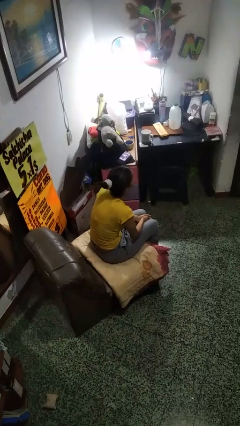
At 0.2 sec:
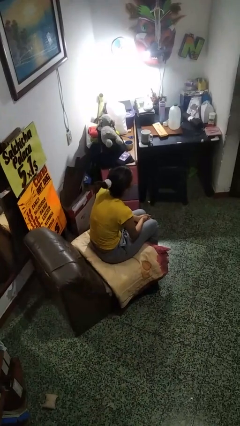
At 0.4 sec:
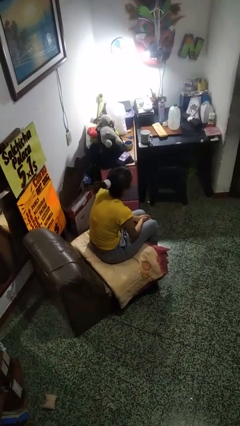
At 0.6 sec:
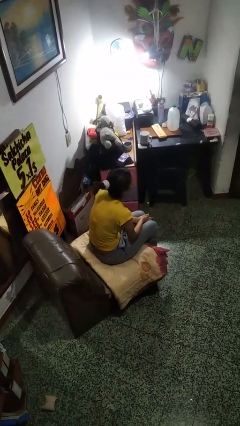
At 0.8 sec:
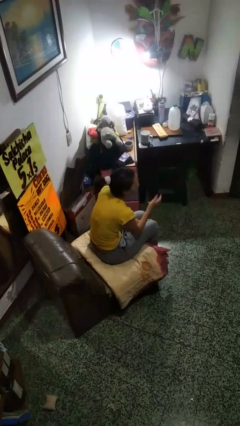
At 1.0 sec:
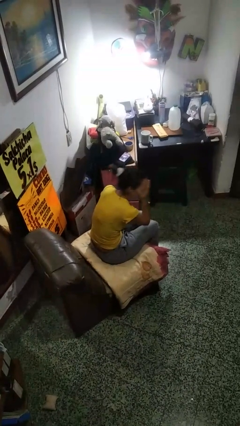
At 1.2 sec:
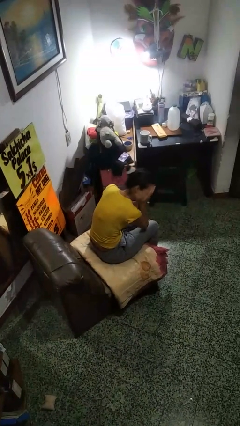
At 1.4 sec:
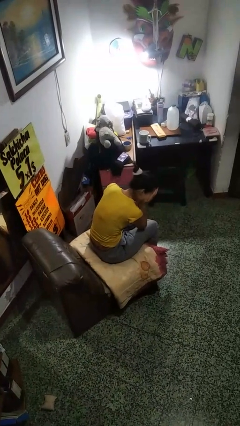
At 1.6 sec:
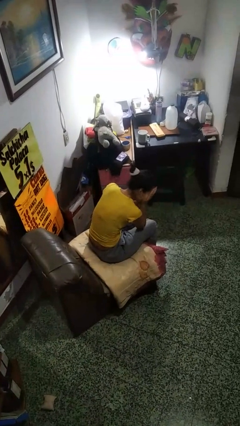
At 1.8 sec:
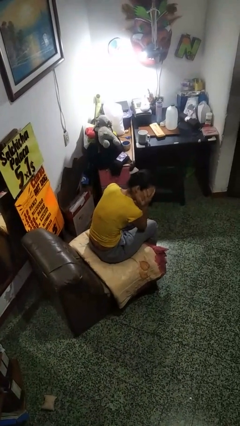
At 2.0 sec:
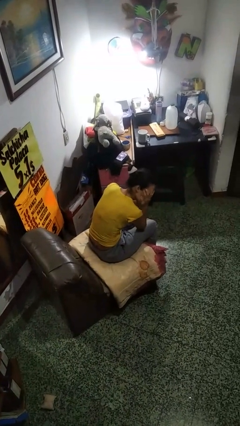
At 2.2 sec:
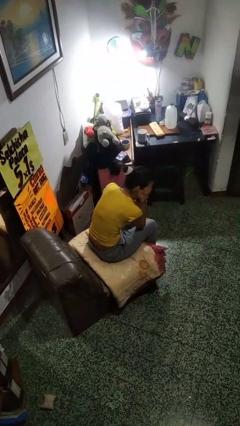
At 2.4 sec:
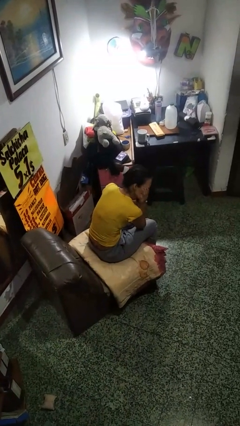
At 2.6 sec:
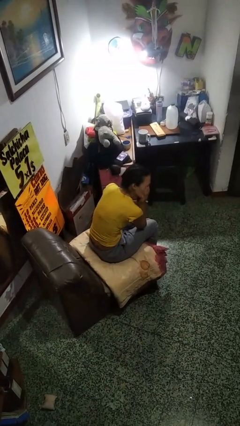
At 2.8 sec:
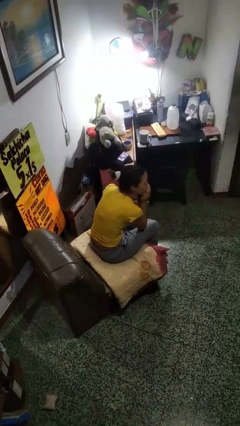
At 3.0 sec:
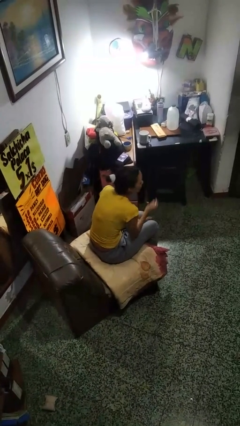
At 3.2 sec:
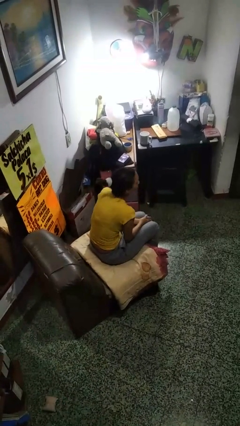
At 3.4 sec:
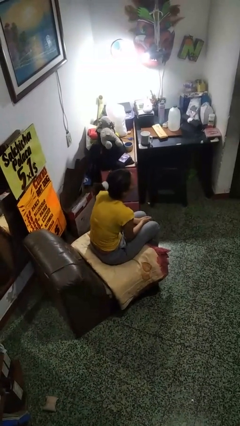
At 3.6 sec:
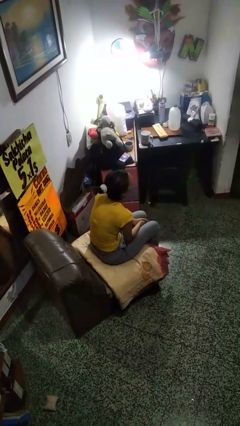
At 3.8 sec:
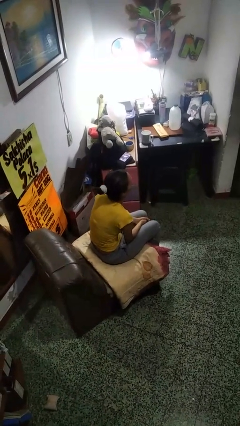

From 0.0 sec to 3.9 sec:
person covers face with hands

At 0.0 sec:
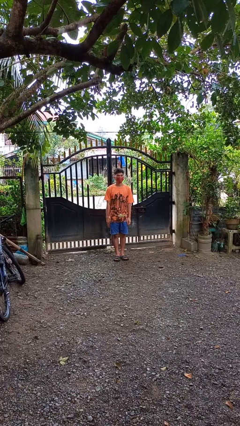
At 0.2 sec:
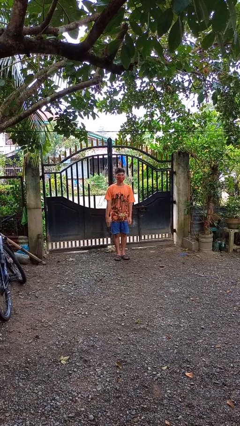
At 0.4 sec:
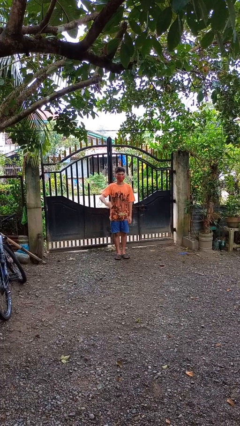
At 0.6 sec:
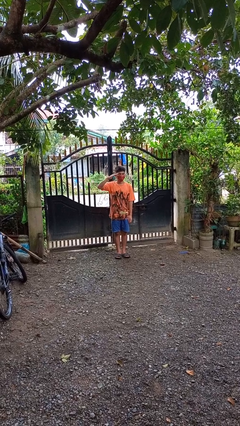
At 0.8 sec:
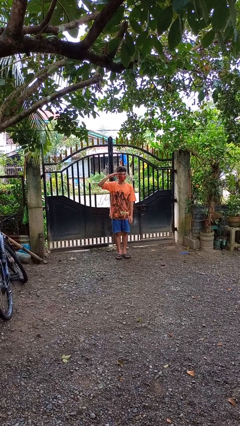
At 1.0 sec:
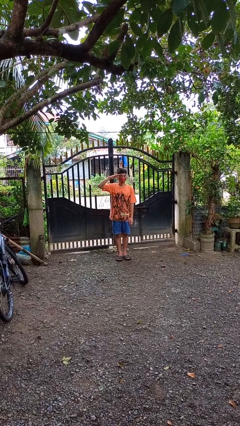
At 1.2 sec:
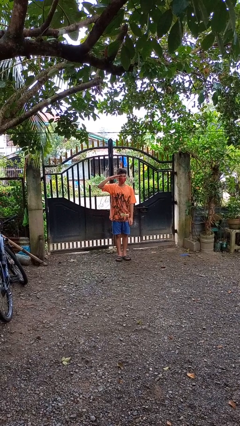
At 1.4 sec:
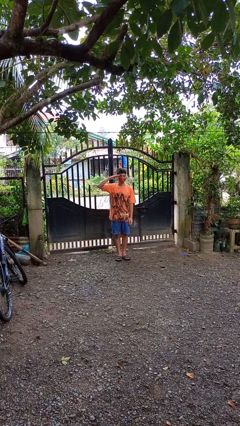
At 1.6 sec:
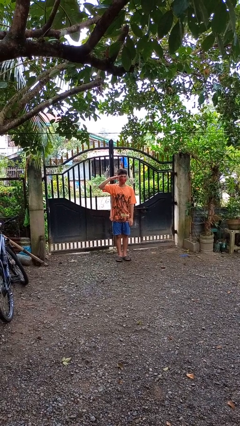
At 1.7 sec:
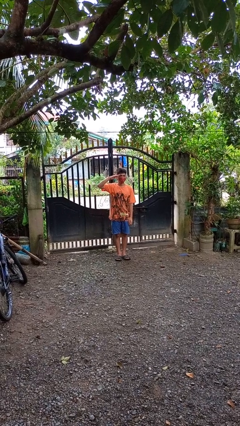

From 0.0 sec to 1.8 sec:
person salutes

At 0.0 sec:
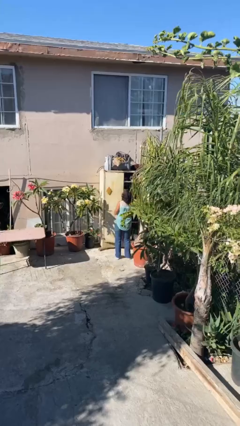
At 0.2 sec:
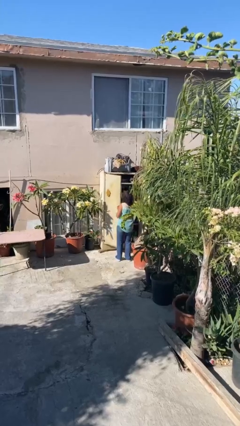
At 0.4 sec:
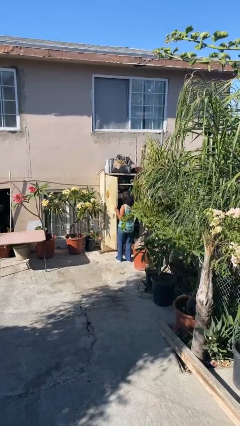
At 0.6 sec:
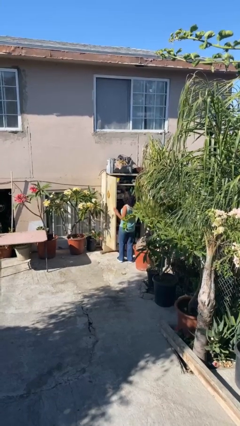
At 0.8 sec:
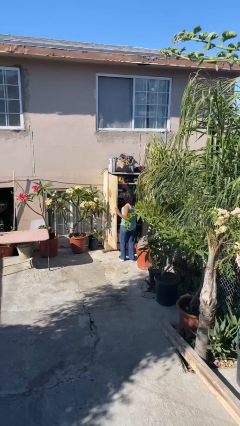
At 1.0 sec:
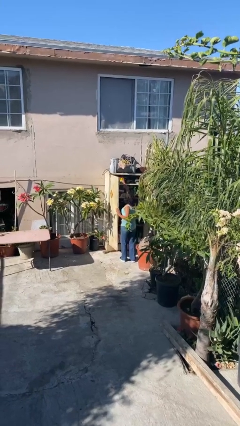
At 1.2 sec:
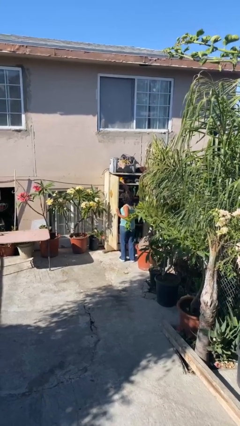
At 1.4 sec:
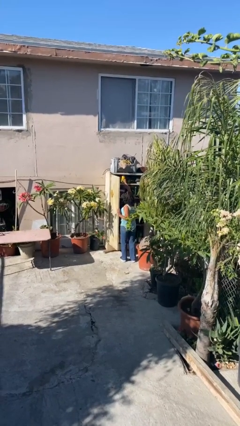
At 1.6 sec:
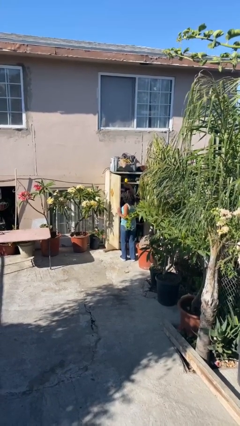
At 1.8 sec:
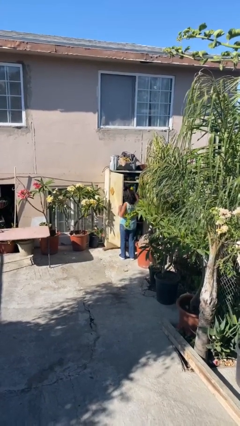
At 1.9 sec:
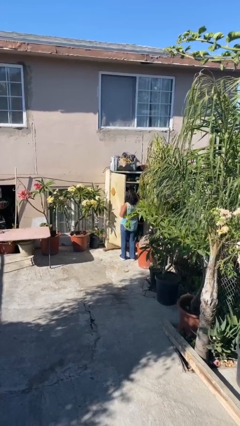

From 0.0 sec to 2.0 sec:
person picks up object from shelf

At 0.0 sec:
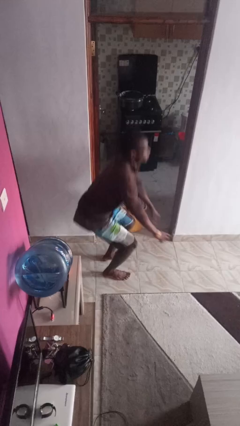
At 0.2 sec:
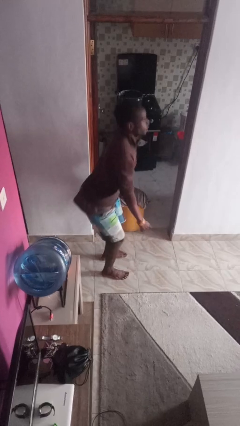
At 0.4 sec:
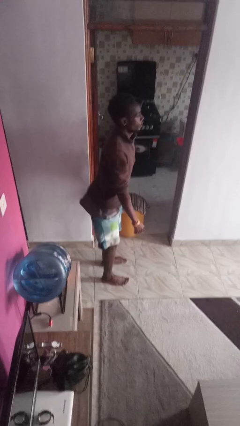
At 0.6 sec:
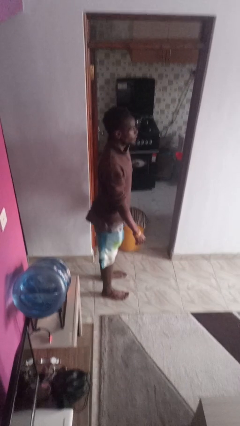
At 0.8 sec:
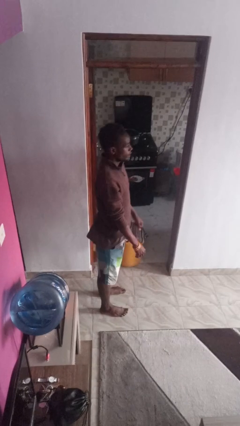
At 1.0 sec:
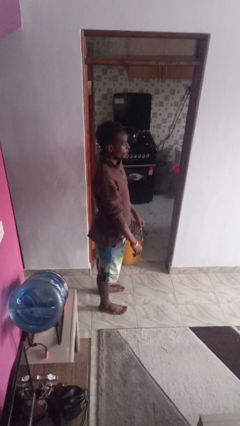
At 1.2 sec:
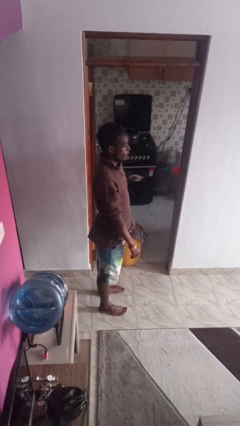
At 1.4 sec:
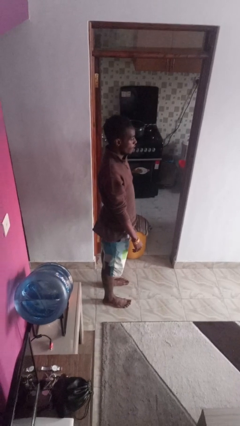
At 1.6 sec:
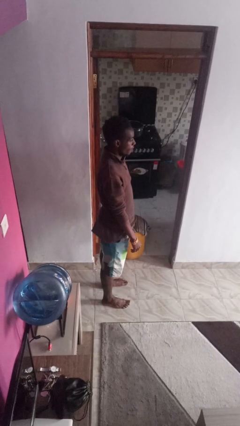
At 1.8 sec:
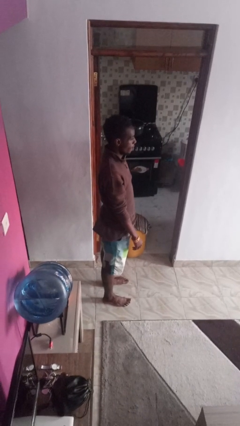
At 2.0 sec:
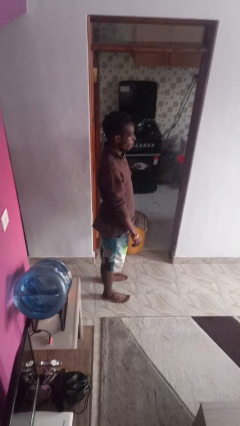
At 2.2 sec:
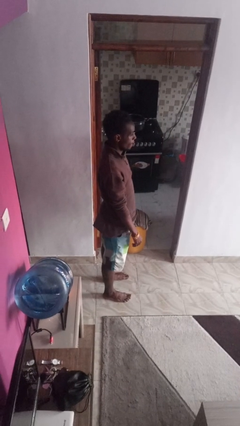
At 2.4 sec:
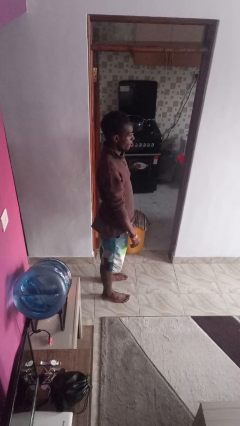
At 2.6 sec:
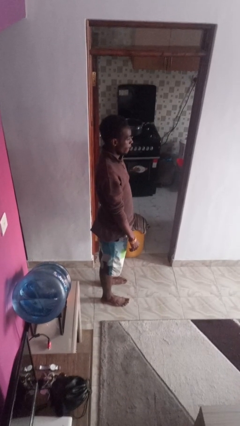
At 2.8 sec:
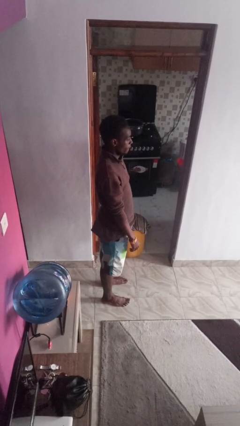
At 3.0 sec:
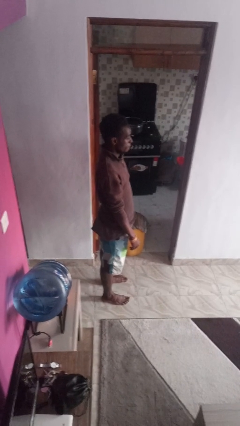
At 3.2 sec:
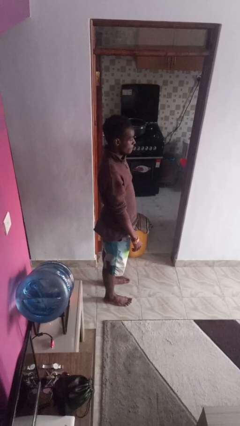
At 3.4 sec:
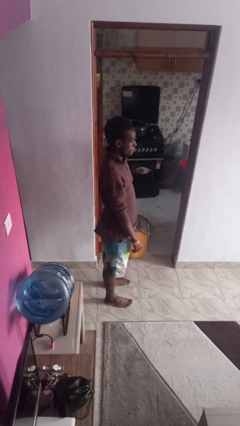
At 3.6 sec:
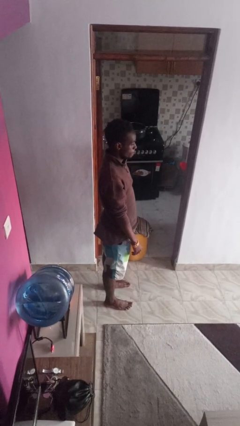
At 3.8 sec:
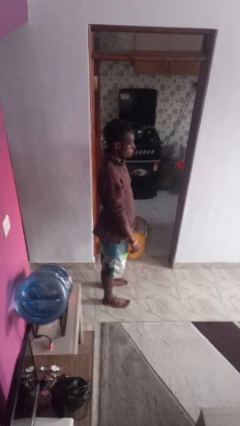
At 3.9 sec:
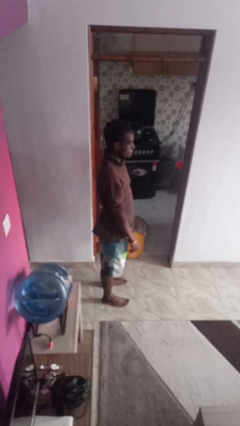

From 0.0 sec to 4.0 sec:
person stands up

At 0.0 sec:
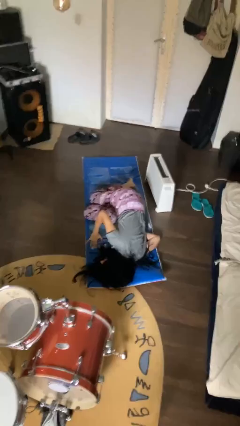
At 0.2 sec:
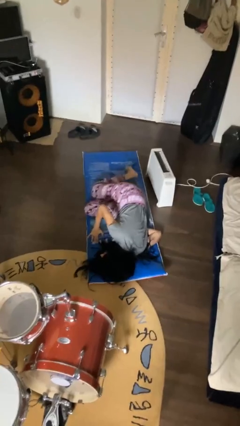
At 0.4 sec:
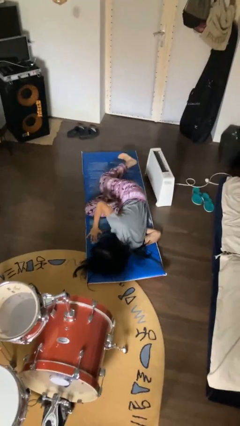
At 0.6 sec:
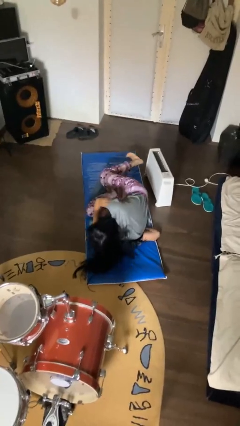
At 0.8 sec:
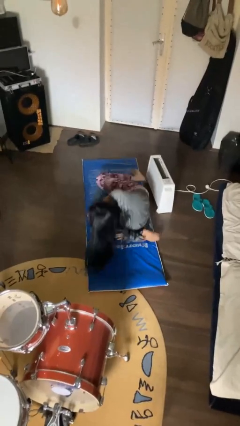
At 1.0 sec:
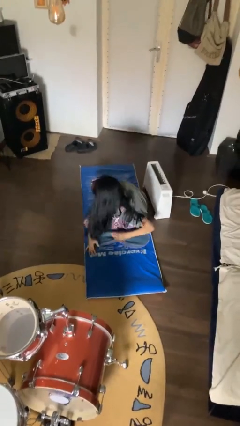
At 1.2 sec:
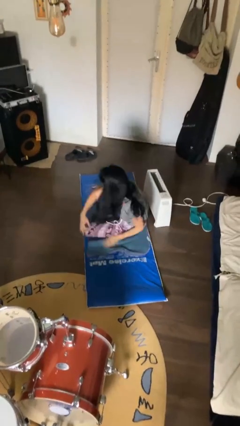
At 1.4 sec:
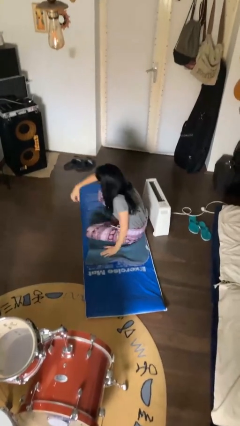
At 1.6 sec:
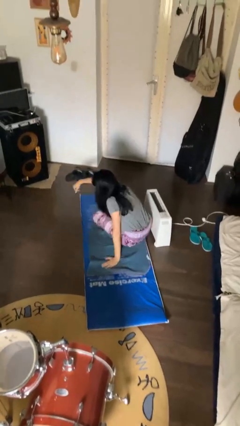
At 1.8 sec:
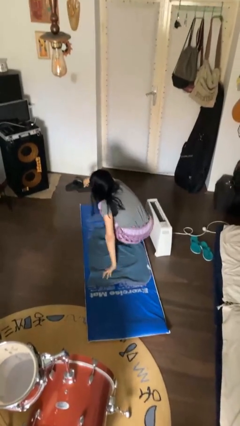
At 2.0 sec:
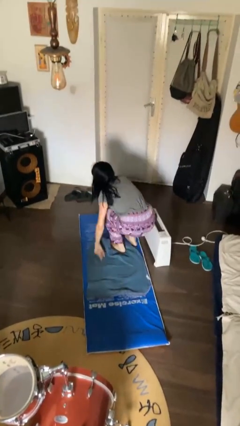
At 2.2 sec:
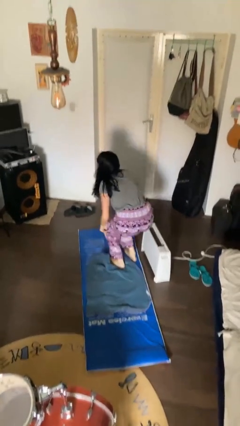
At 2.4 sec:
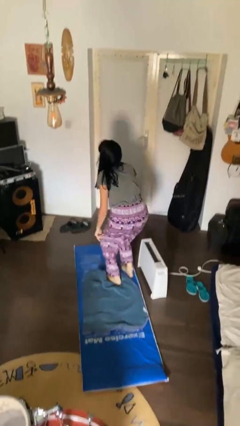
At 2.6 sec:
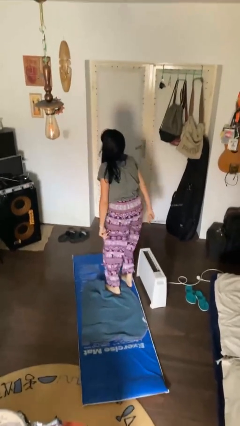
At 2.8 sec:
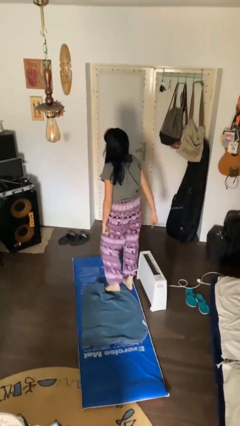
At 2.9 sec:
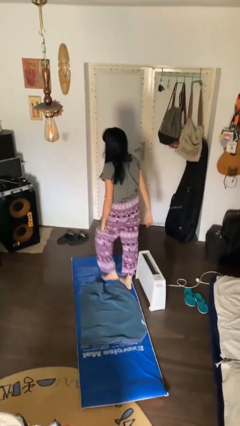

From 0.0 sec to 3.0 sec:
person stands up from floor

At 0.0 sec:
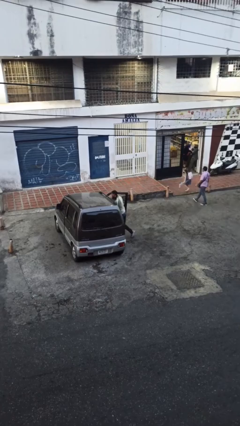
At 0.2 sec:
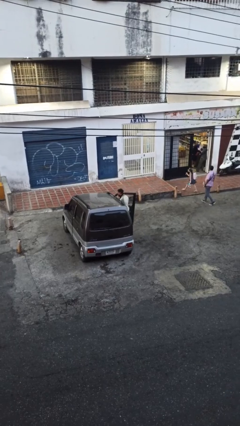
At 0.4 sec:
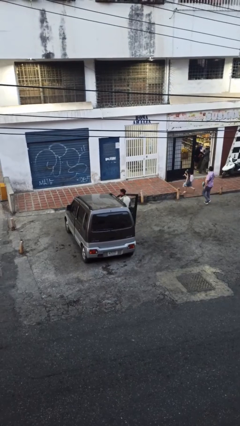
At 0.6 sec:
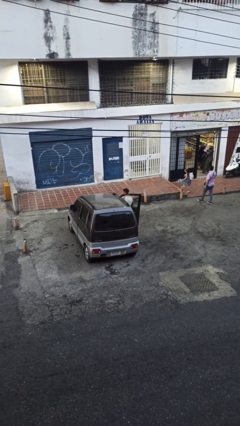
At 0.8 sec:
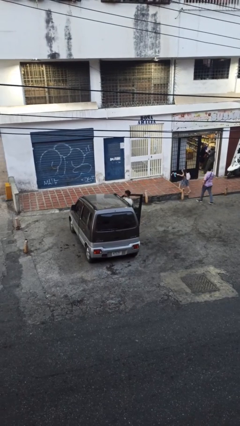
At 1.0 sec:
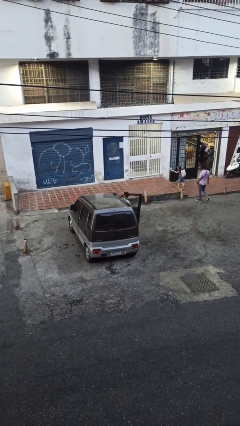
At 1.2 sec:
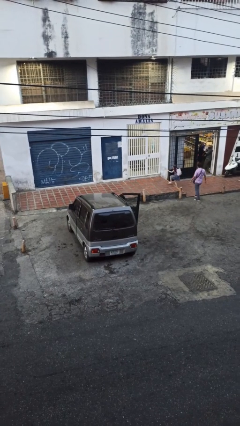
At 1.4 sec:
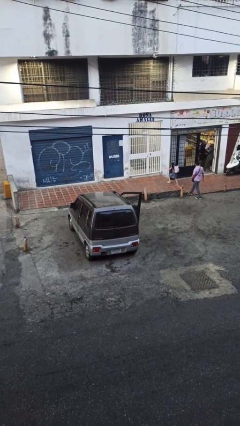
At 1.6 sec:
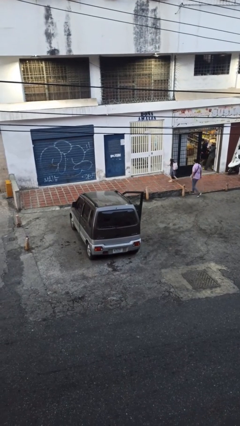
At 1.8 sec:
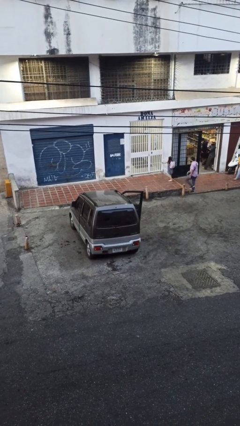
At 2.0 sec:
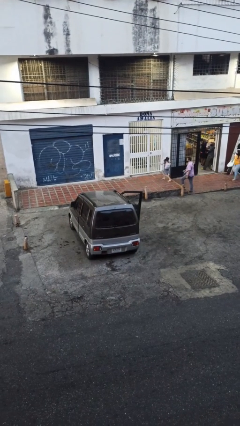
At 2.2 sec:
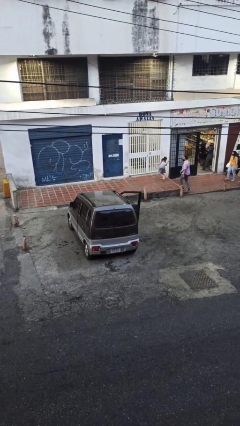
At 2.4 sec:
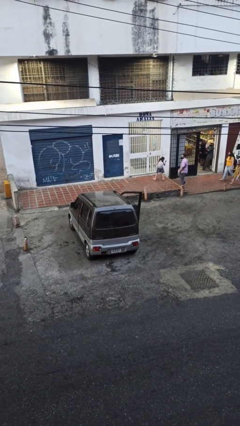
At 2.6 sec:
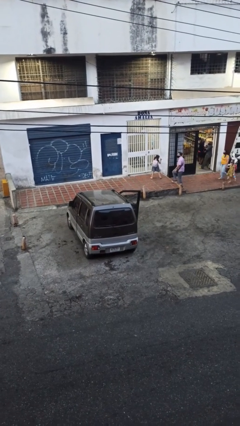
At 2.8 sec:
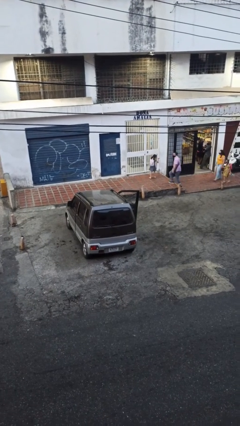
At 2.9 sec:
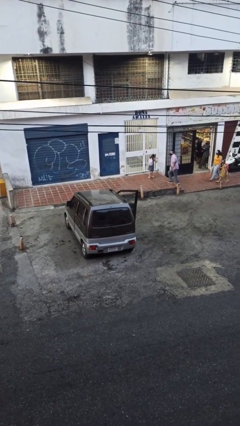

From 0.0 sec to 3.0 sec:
person enters car
